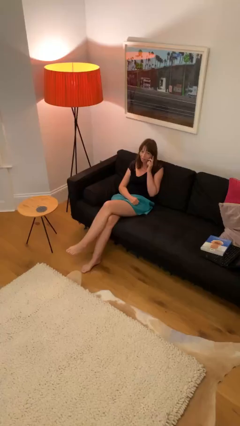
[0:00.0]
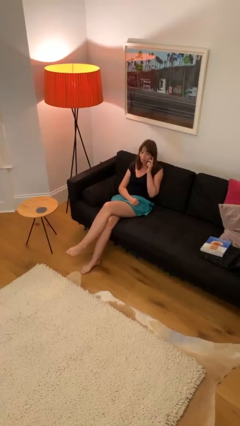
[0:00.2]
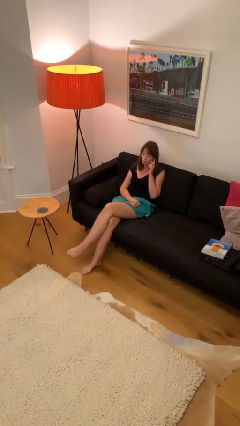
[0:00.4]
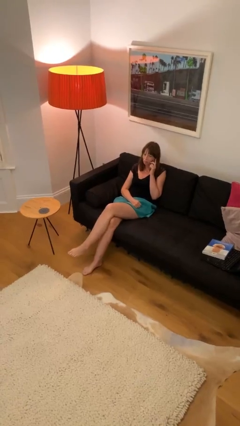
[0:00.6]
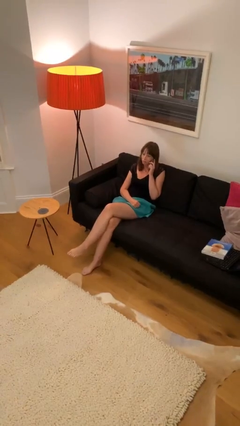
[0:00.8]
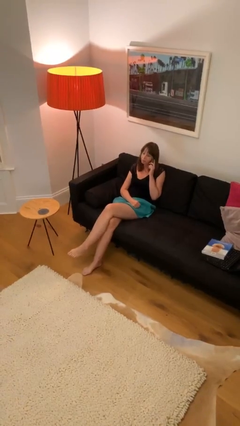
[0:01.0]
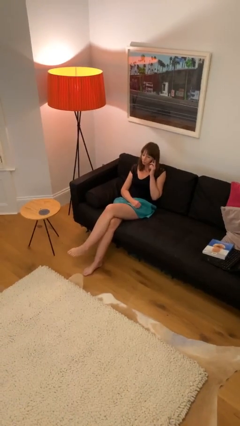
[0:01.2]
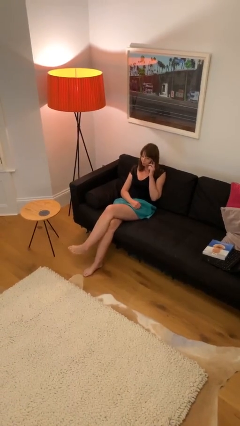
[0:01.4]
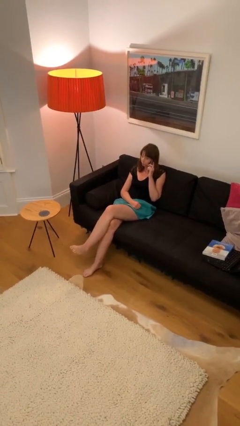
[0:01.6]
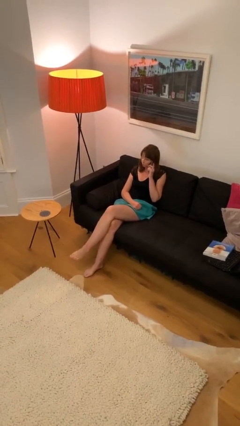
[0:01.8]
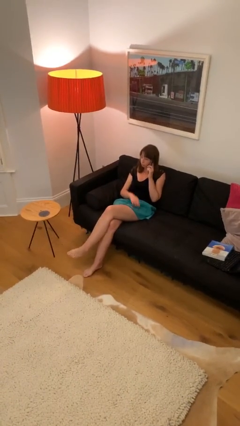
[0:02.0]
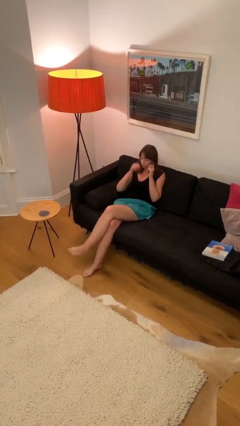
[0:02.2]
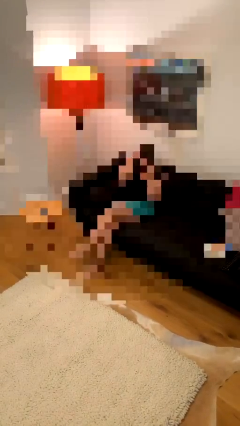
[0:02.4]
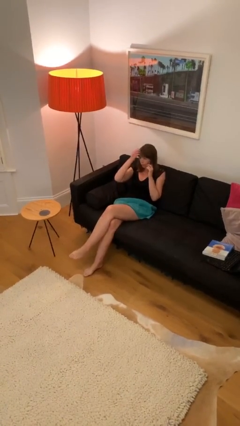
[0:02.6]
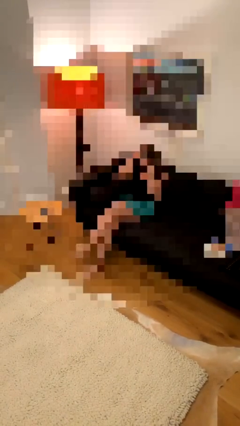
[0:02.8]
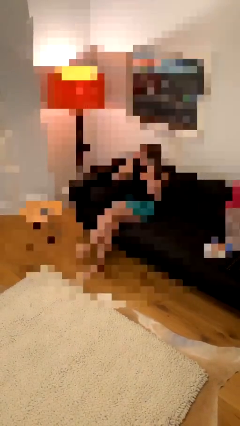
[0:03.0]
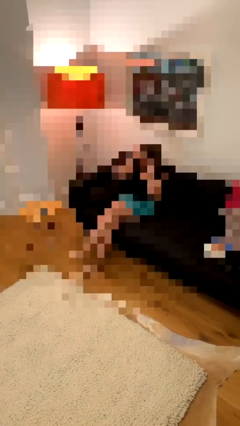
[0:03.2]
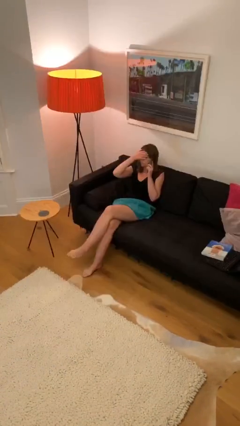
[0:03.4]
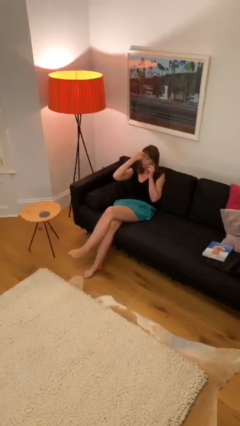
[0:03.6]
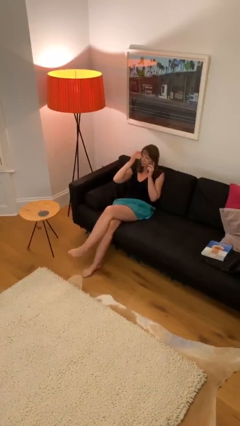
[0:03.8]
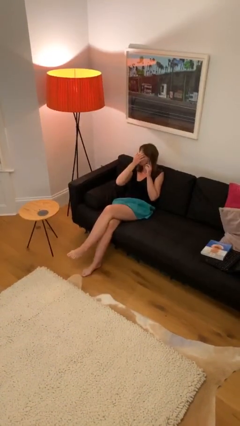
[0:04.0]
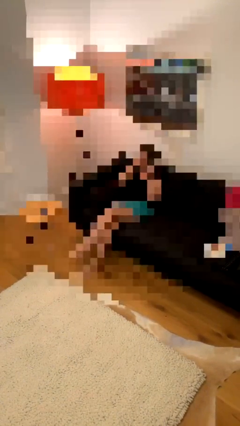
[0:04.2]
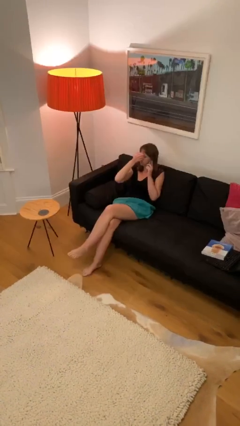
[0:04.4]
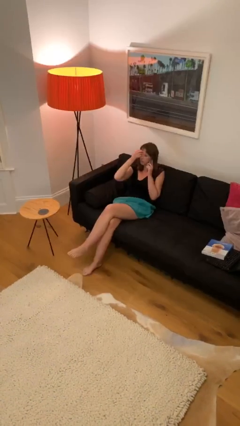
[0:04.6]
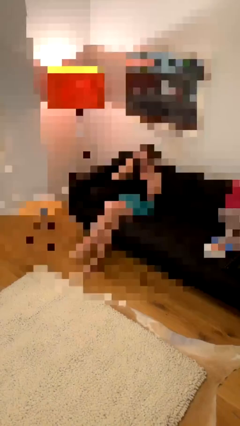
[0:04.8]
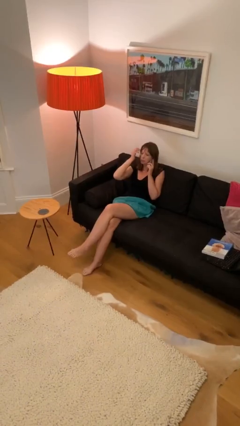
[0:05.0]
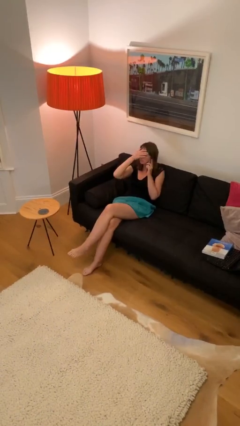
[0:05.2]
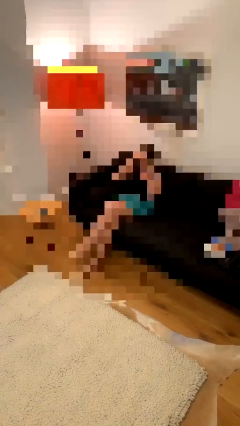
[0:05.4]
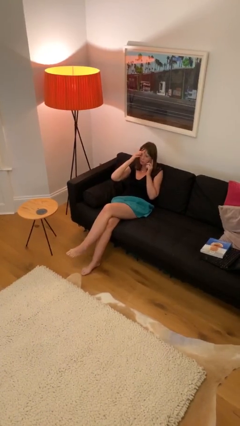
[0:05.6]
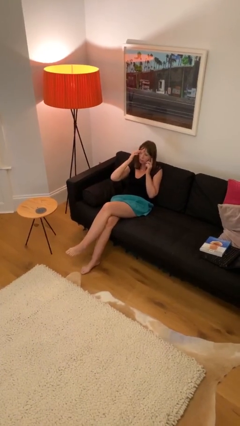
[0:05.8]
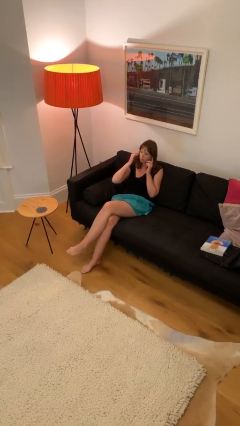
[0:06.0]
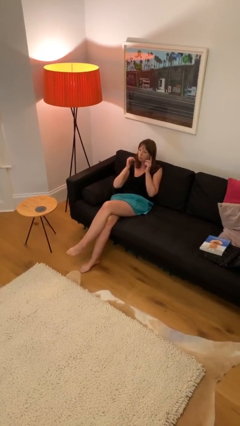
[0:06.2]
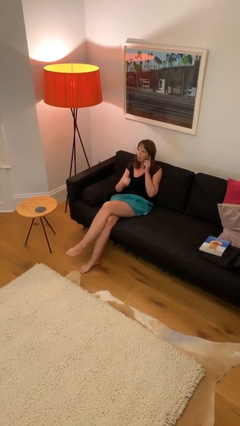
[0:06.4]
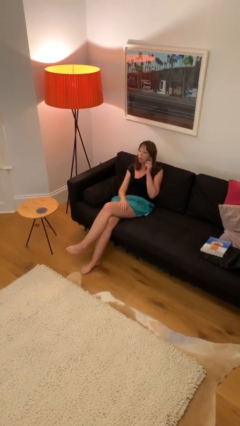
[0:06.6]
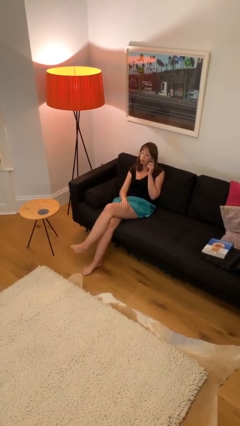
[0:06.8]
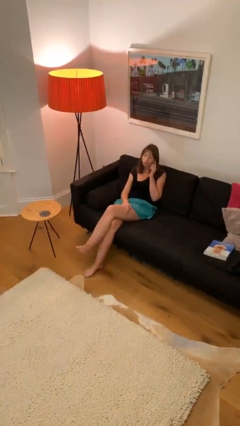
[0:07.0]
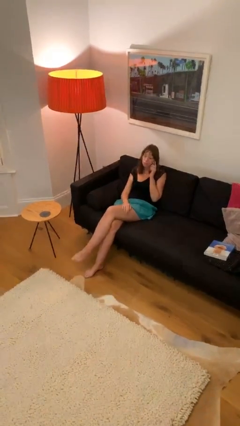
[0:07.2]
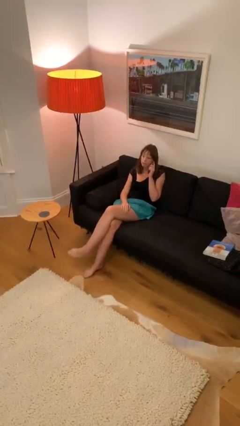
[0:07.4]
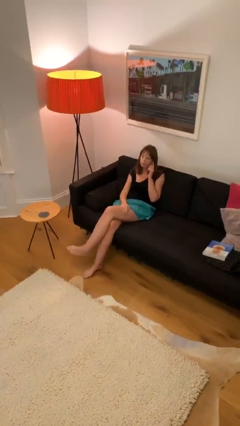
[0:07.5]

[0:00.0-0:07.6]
person talks on phone

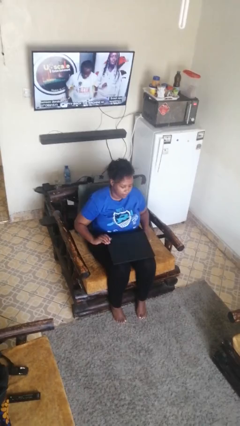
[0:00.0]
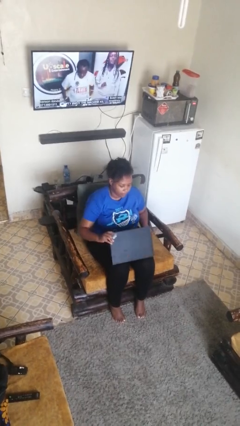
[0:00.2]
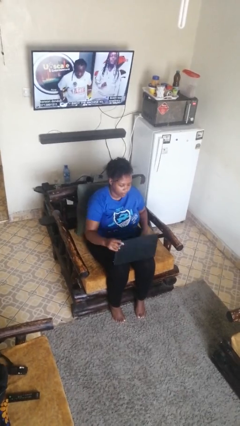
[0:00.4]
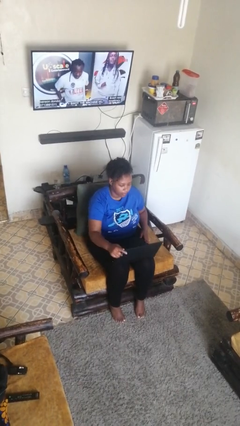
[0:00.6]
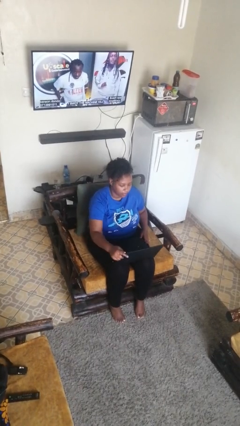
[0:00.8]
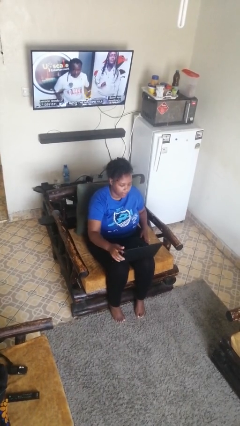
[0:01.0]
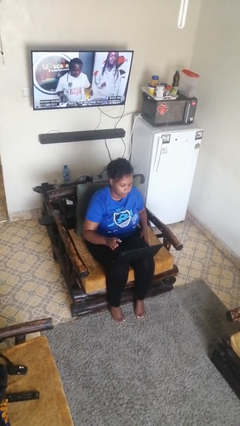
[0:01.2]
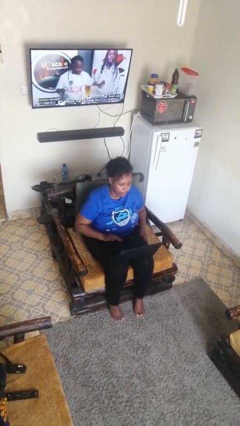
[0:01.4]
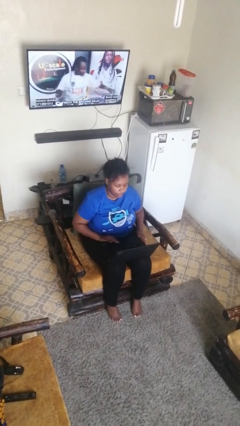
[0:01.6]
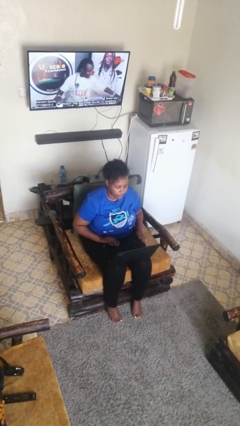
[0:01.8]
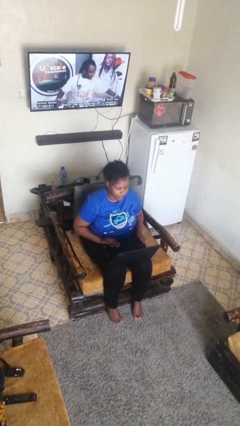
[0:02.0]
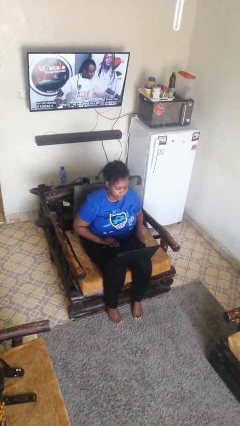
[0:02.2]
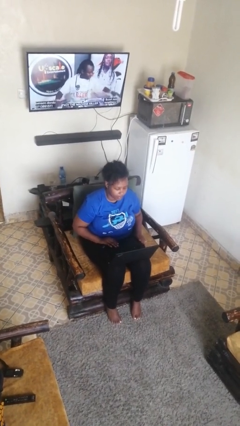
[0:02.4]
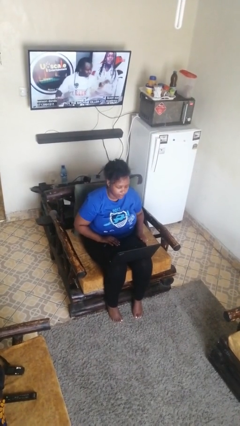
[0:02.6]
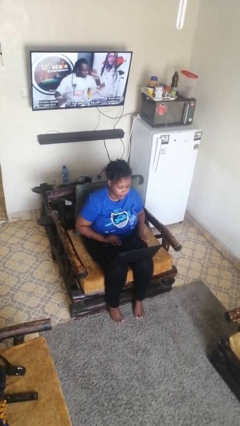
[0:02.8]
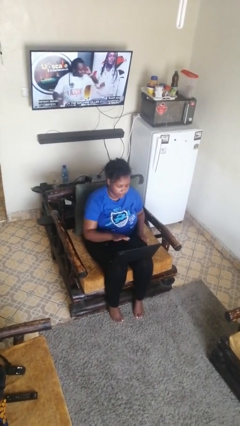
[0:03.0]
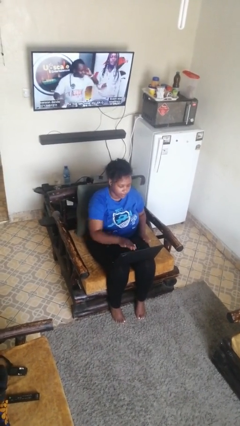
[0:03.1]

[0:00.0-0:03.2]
person opens laptop

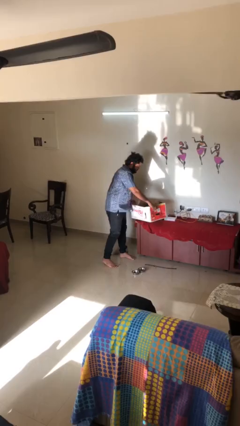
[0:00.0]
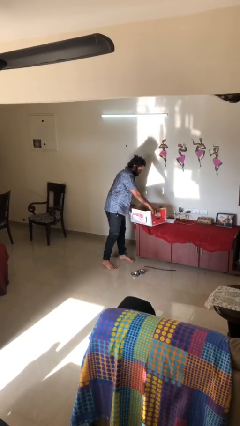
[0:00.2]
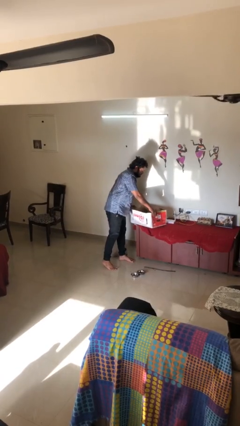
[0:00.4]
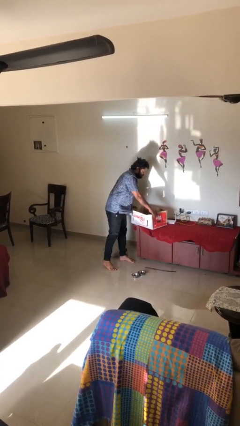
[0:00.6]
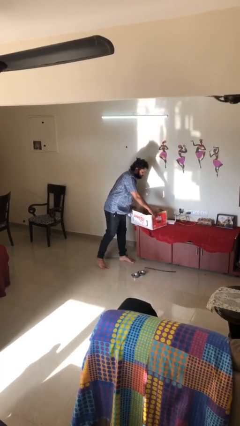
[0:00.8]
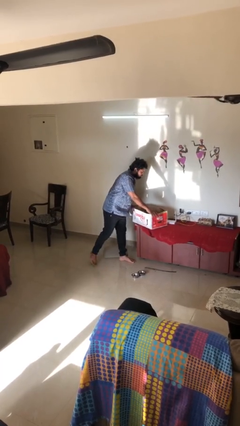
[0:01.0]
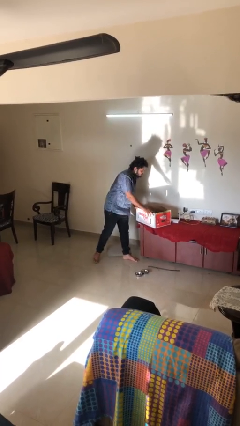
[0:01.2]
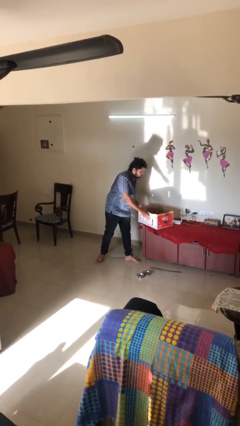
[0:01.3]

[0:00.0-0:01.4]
person puts down object on table

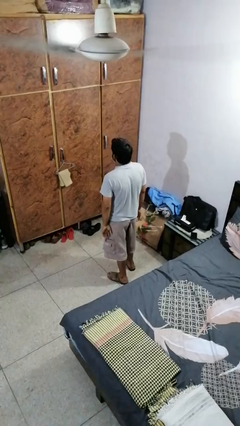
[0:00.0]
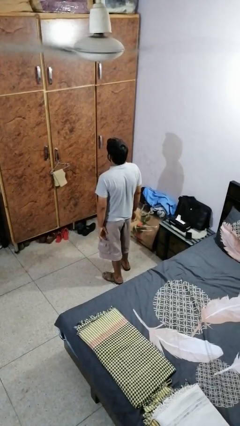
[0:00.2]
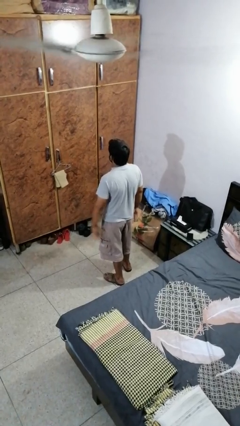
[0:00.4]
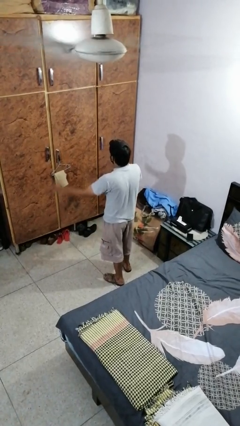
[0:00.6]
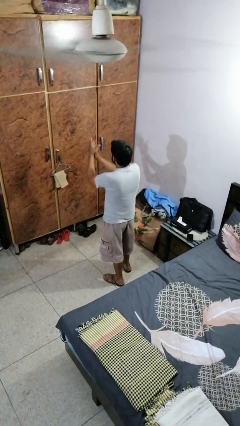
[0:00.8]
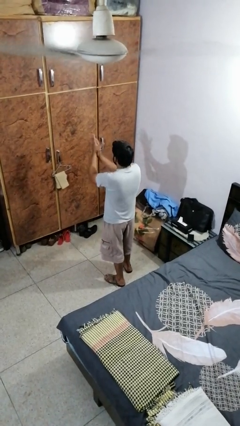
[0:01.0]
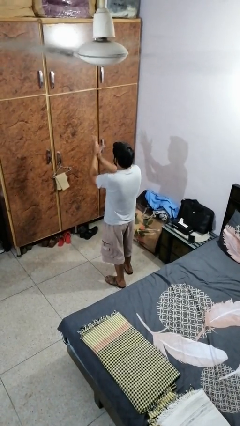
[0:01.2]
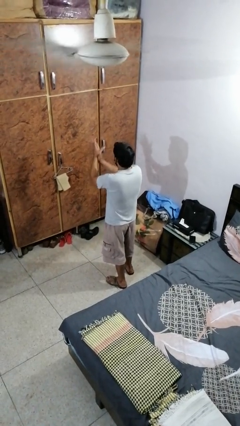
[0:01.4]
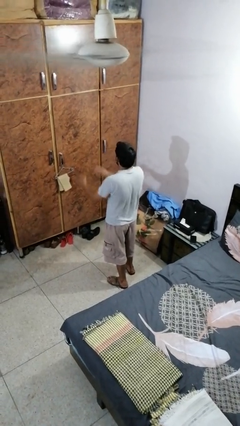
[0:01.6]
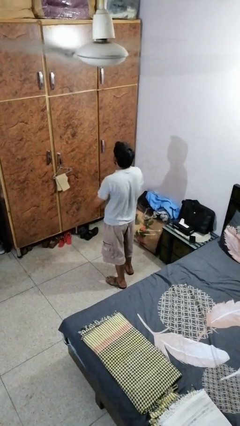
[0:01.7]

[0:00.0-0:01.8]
person claps hands

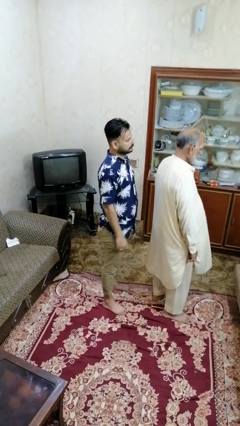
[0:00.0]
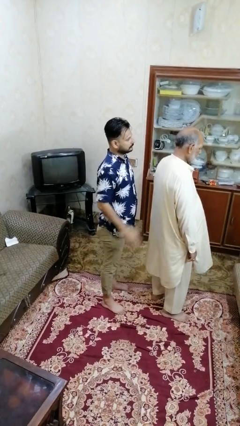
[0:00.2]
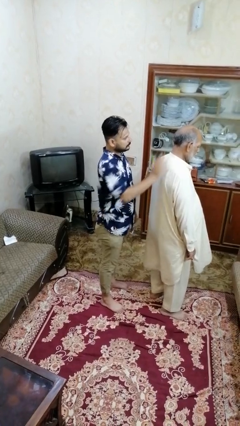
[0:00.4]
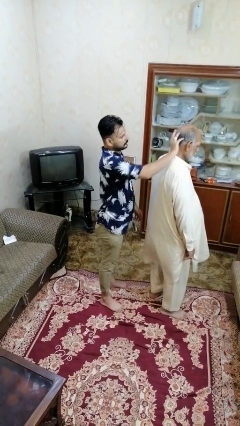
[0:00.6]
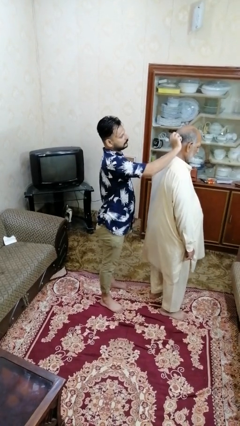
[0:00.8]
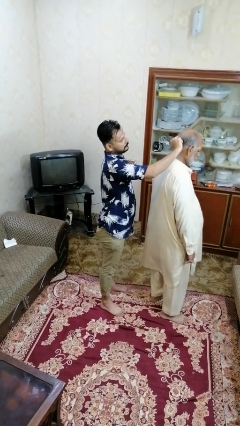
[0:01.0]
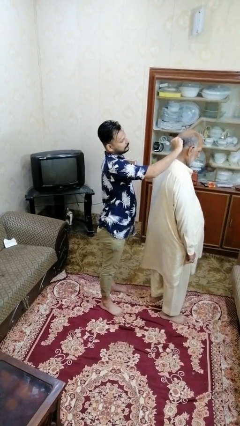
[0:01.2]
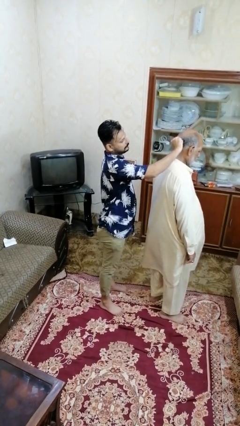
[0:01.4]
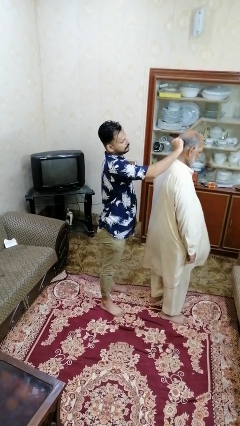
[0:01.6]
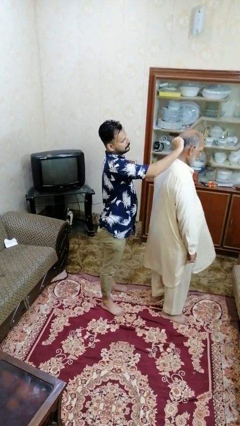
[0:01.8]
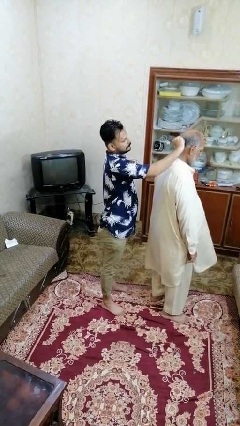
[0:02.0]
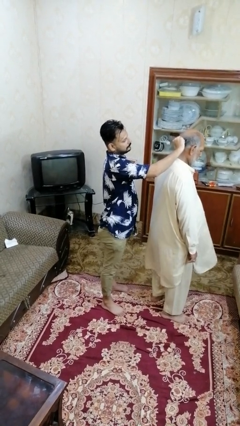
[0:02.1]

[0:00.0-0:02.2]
person grabs person by hair

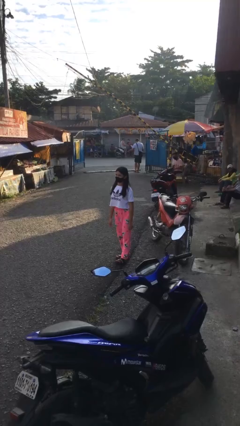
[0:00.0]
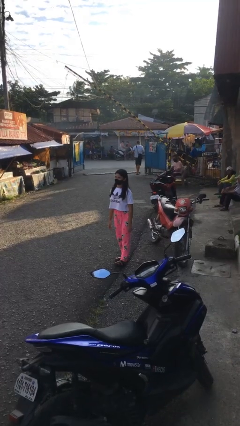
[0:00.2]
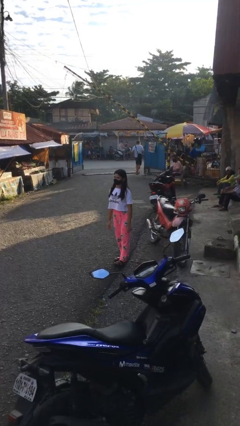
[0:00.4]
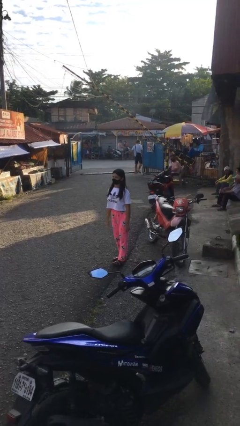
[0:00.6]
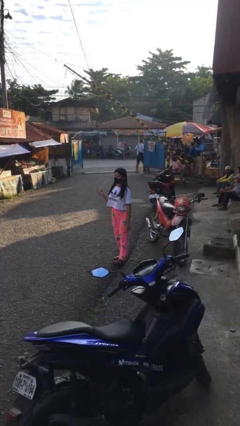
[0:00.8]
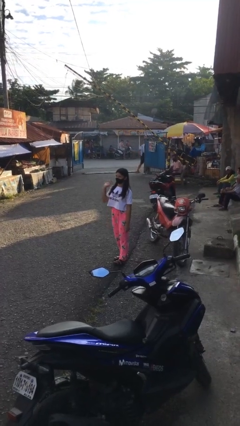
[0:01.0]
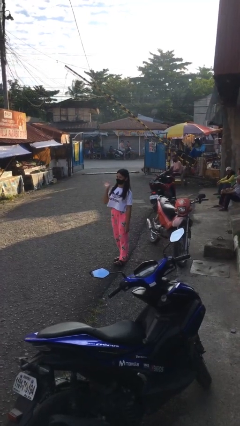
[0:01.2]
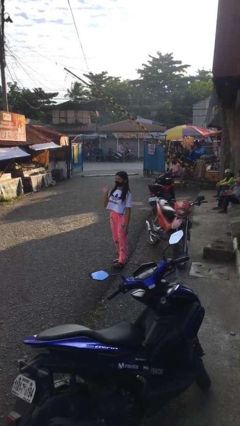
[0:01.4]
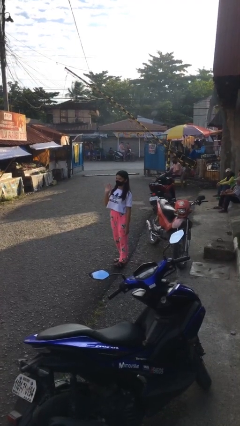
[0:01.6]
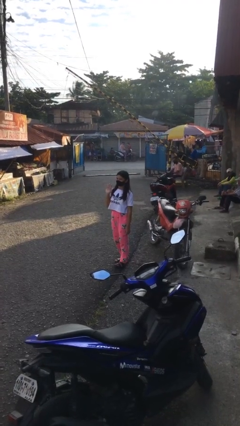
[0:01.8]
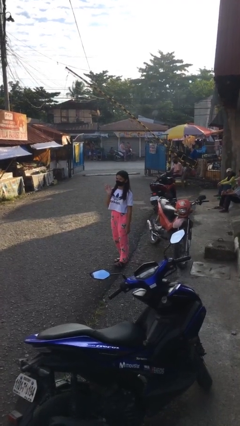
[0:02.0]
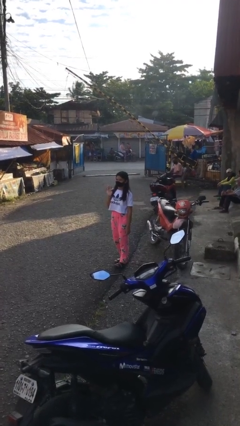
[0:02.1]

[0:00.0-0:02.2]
person waves at person
